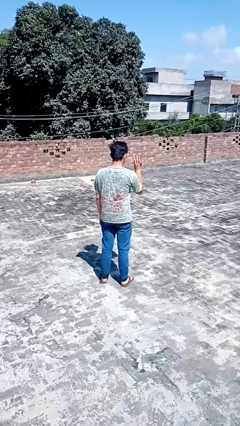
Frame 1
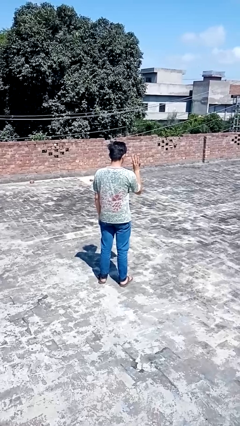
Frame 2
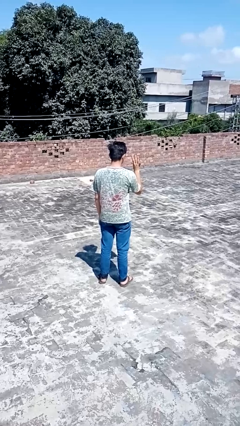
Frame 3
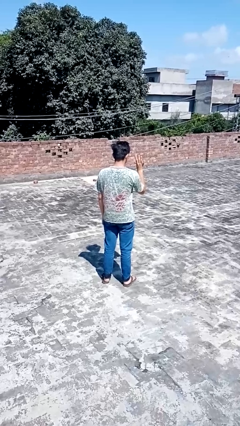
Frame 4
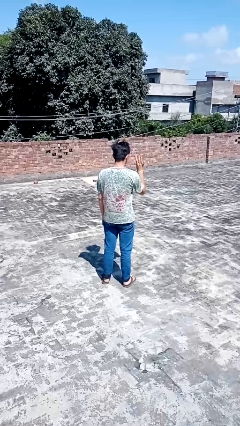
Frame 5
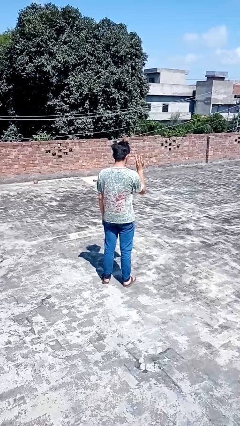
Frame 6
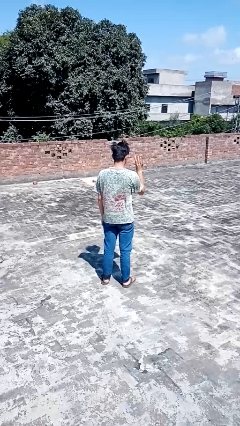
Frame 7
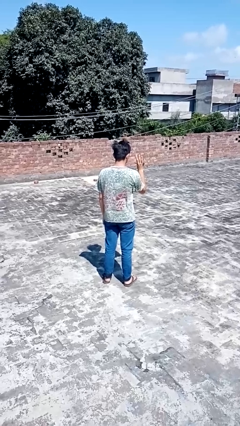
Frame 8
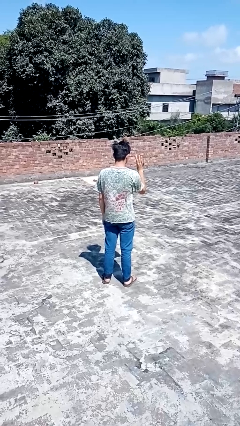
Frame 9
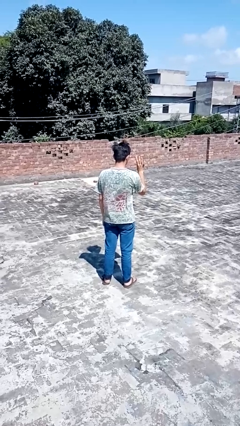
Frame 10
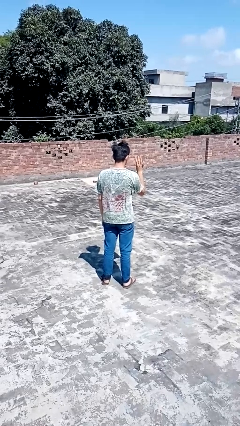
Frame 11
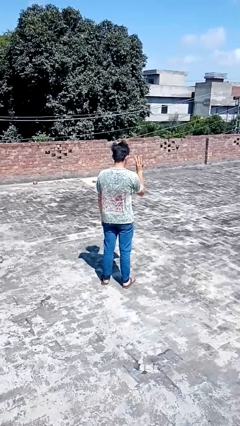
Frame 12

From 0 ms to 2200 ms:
person gestures number four

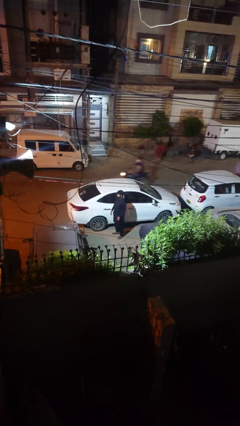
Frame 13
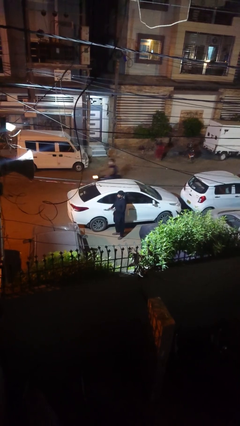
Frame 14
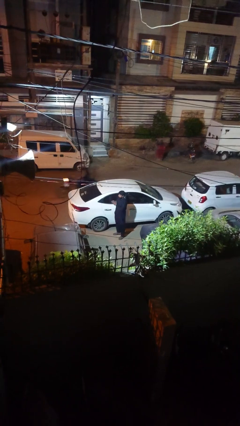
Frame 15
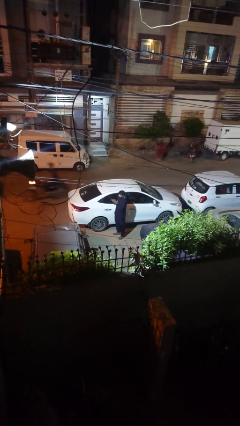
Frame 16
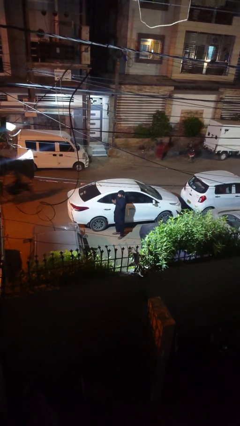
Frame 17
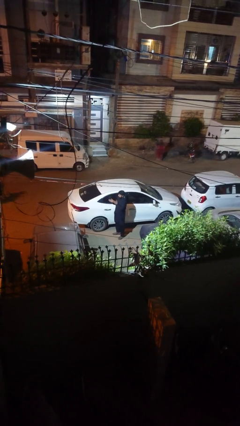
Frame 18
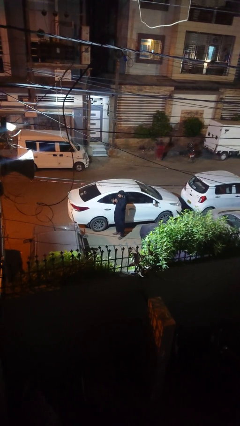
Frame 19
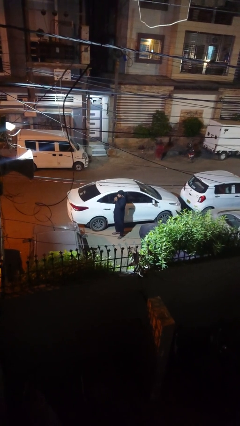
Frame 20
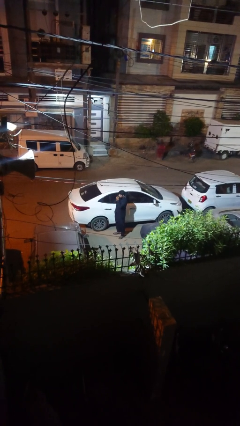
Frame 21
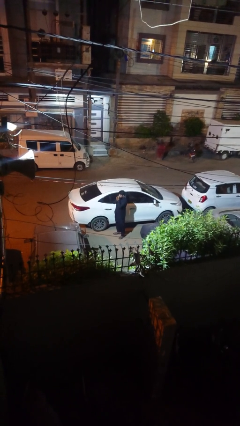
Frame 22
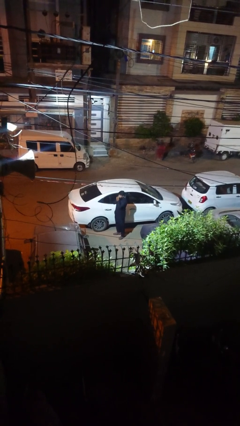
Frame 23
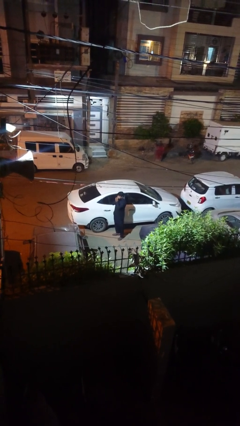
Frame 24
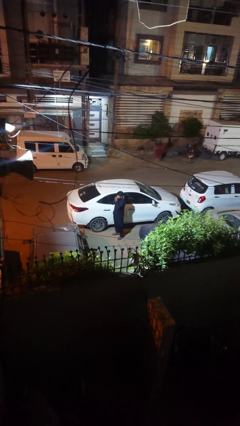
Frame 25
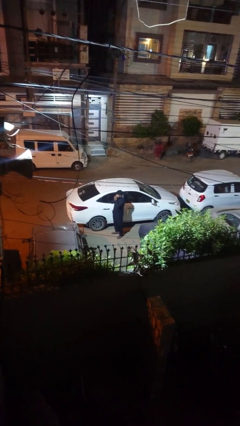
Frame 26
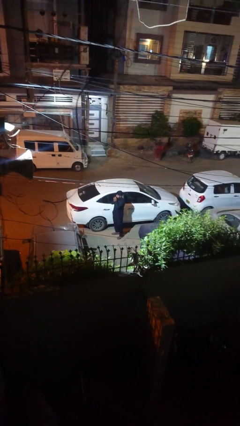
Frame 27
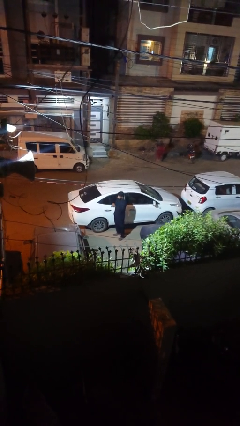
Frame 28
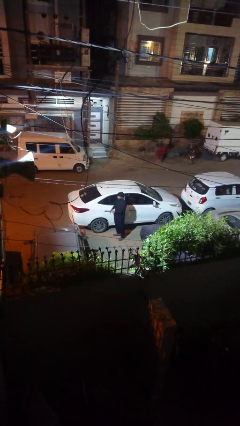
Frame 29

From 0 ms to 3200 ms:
person blows into hands

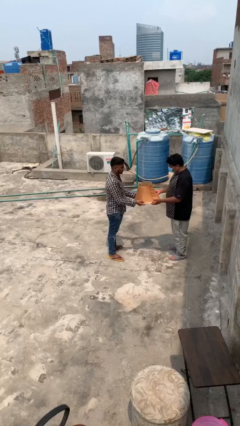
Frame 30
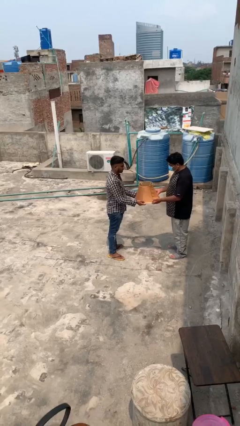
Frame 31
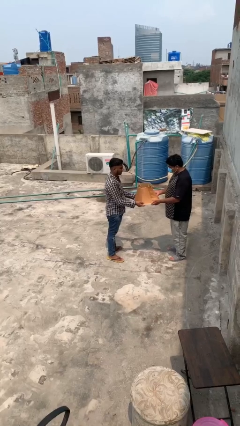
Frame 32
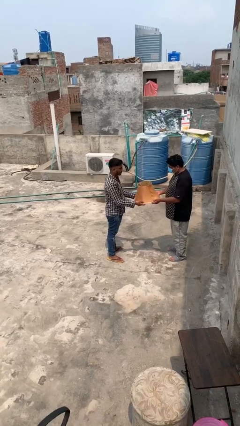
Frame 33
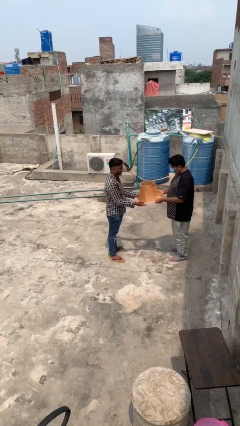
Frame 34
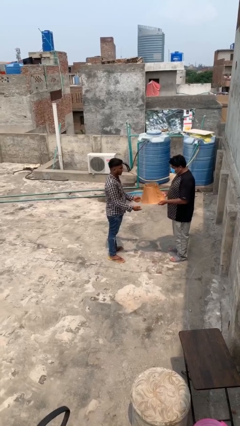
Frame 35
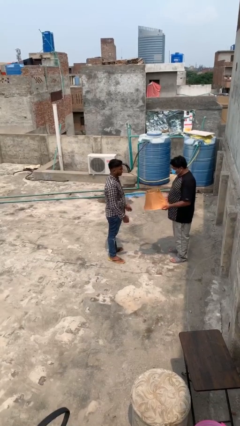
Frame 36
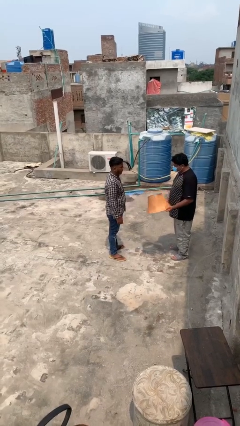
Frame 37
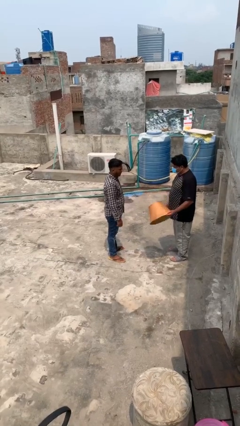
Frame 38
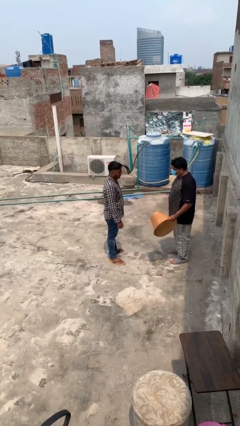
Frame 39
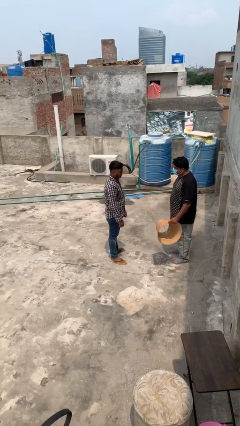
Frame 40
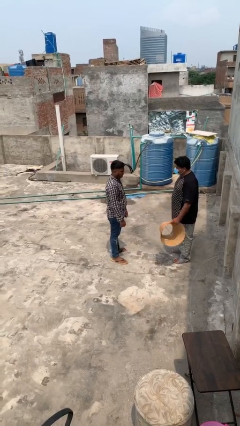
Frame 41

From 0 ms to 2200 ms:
person transfers object to person

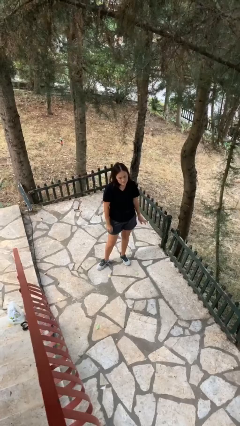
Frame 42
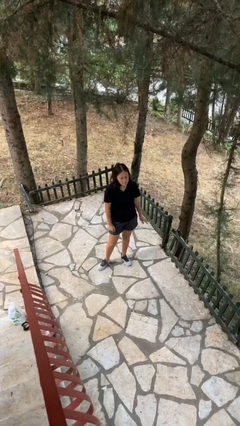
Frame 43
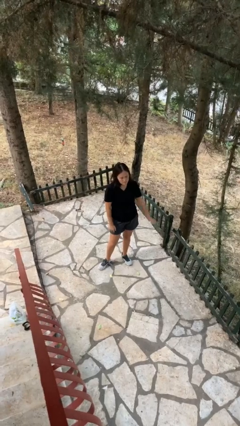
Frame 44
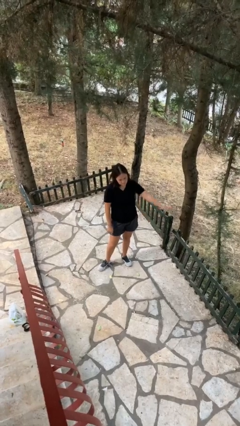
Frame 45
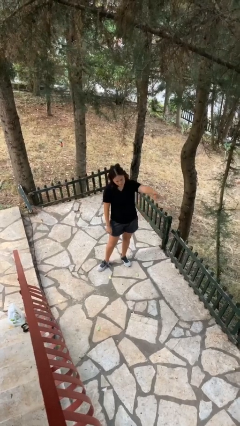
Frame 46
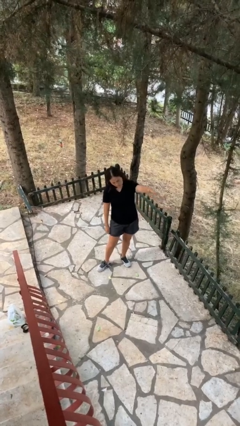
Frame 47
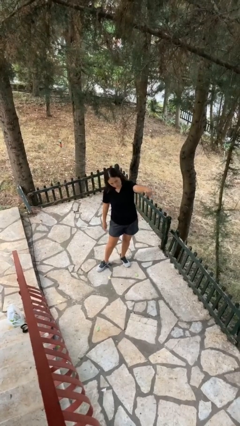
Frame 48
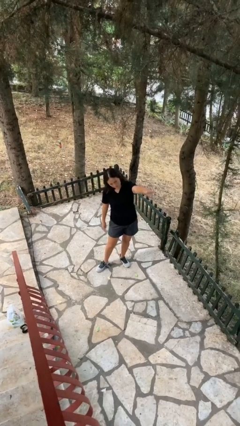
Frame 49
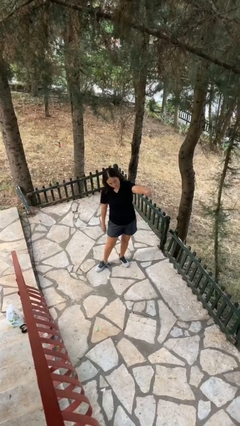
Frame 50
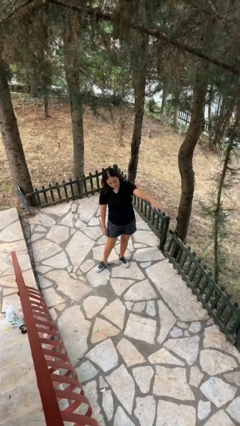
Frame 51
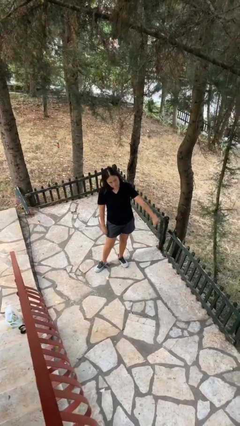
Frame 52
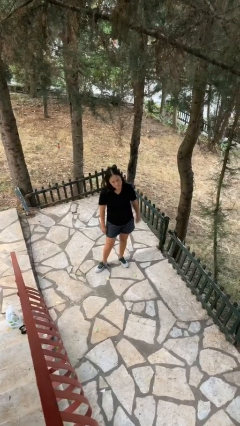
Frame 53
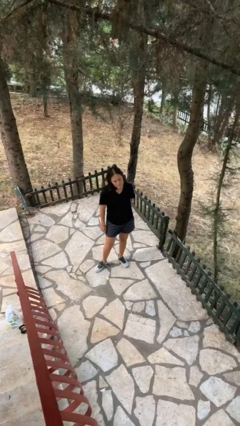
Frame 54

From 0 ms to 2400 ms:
person gestures come here

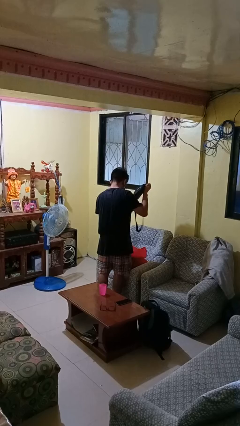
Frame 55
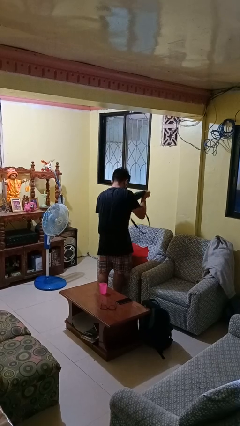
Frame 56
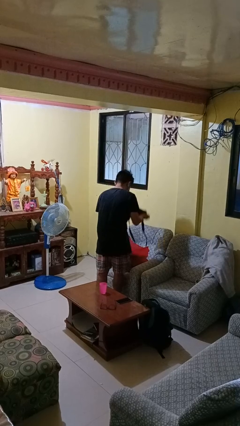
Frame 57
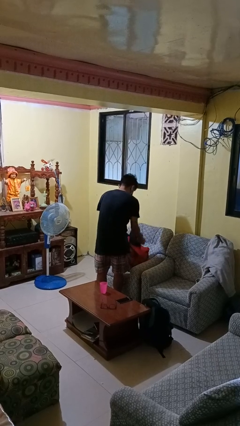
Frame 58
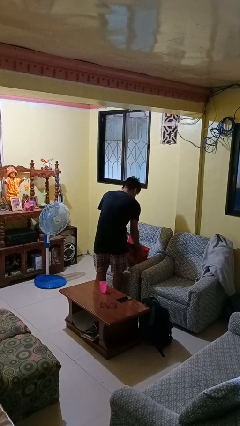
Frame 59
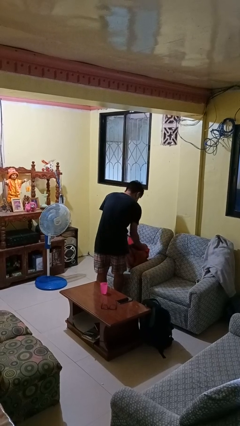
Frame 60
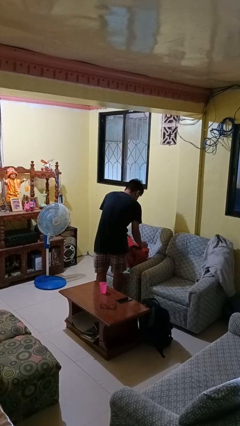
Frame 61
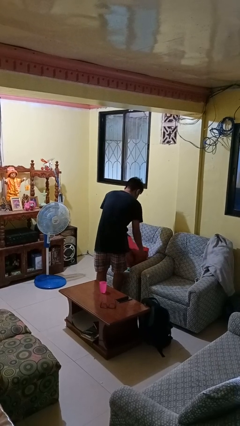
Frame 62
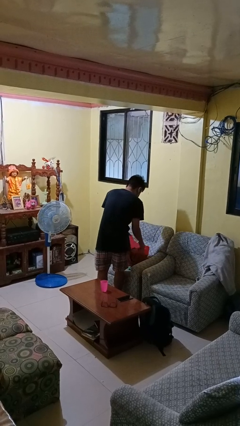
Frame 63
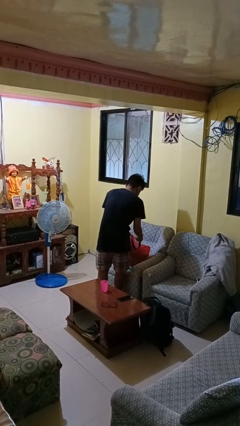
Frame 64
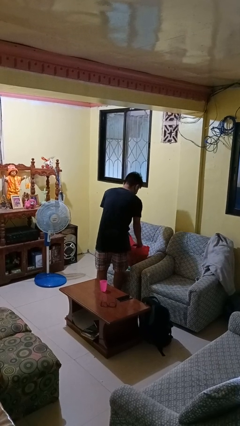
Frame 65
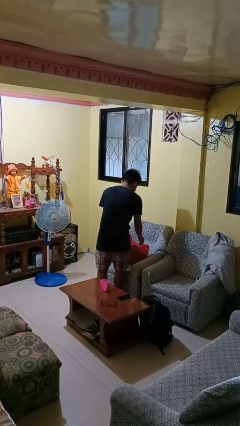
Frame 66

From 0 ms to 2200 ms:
person puts object into bag

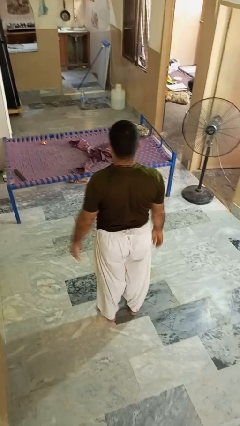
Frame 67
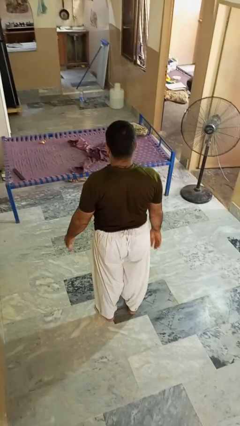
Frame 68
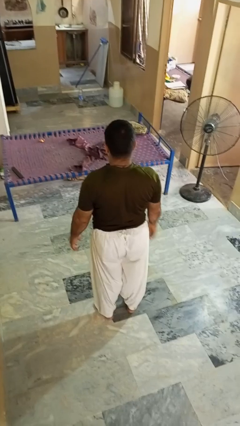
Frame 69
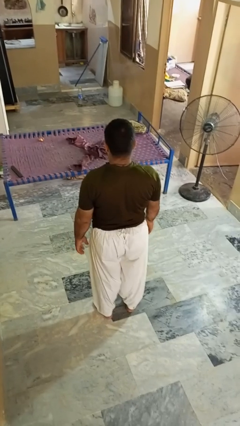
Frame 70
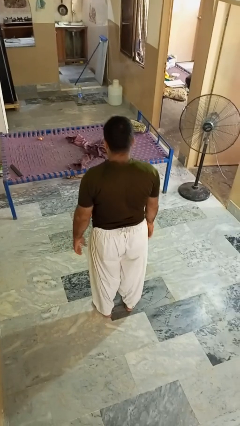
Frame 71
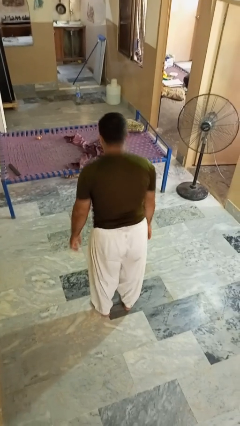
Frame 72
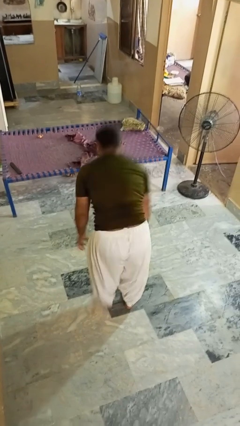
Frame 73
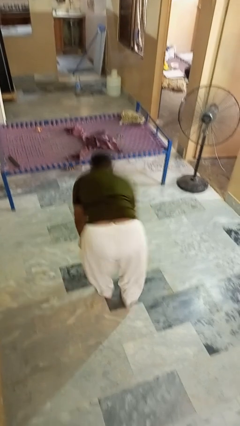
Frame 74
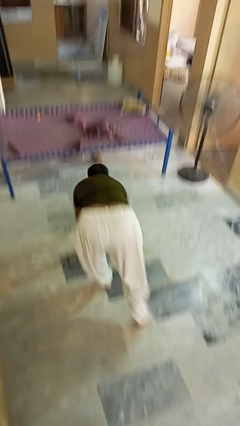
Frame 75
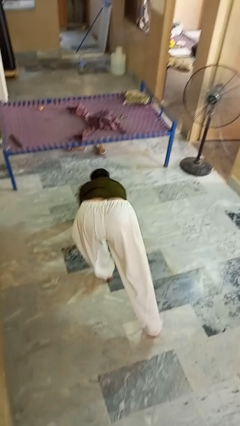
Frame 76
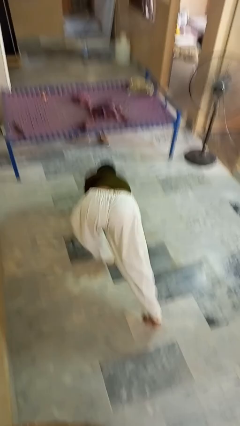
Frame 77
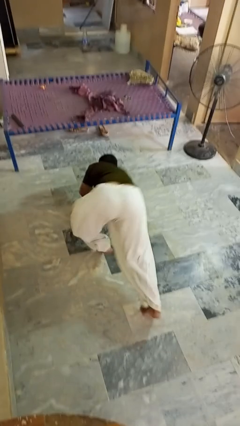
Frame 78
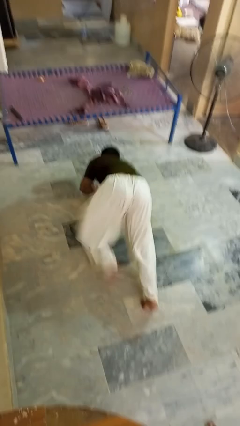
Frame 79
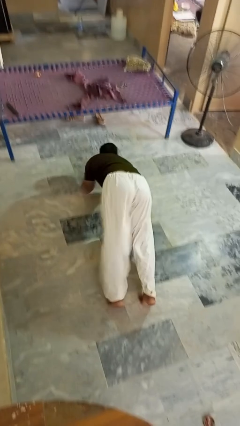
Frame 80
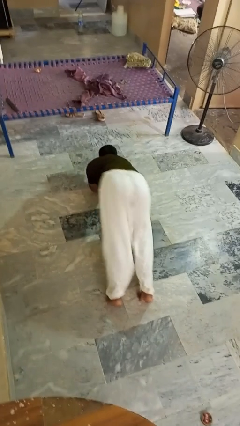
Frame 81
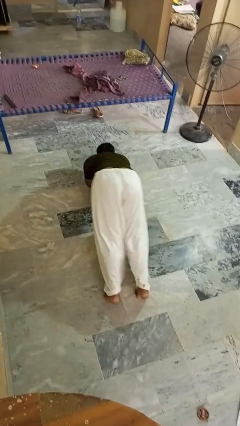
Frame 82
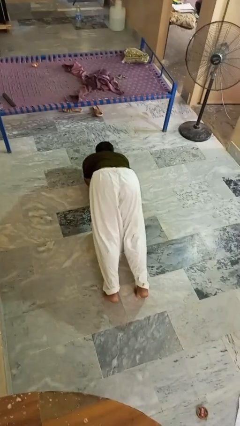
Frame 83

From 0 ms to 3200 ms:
person exercises with plank

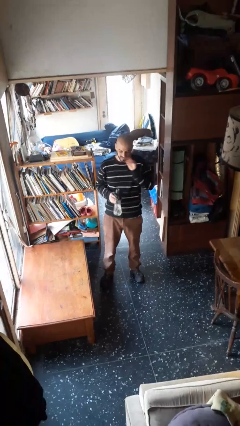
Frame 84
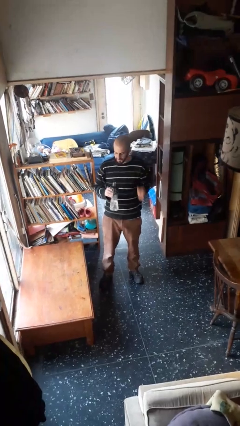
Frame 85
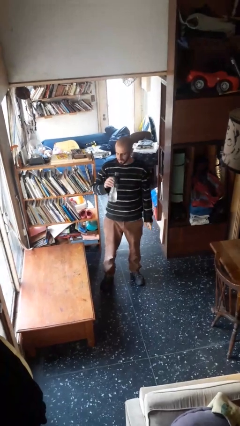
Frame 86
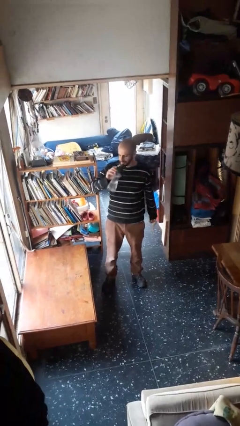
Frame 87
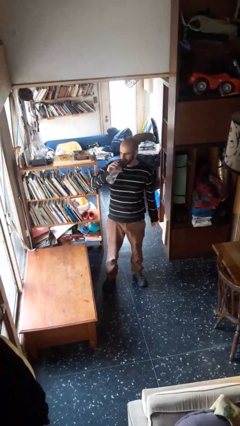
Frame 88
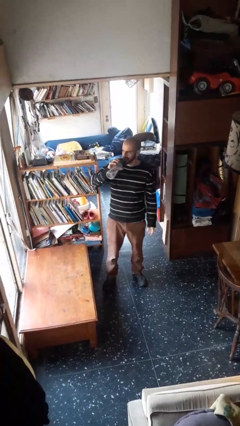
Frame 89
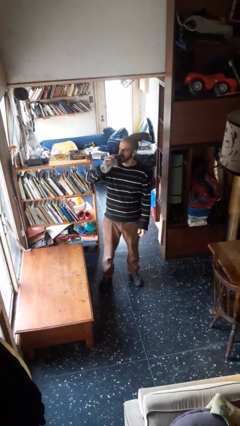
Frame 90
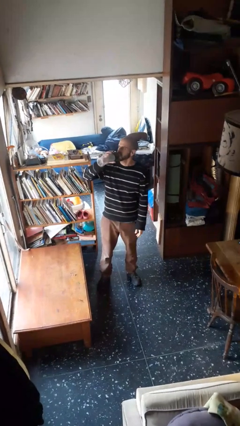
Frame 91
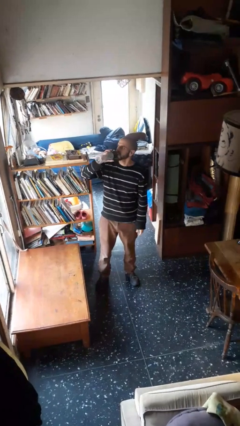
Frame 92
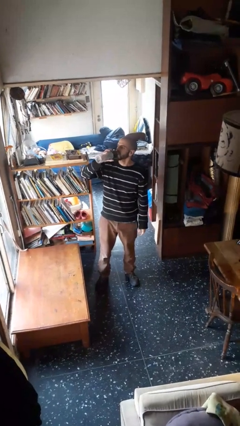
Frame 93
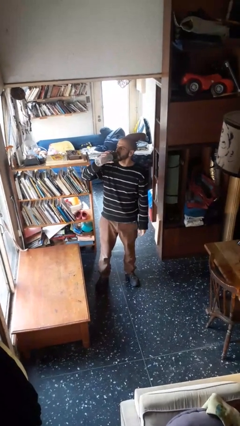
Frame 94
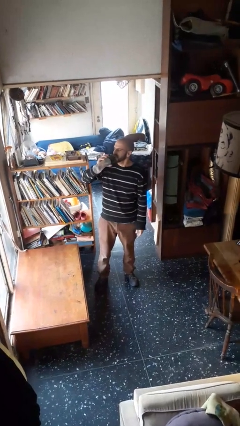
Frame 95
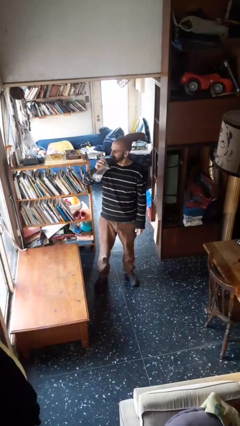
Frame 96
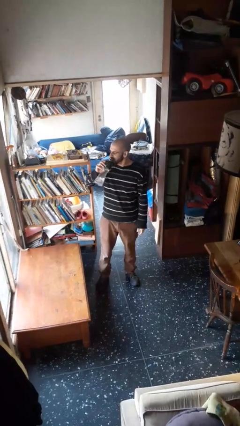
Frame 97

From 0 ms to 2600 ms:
person drinks from bottle
